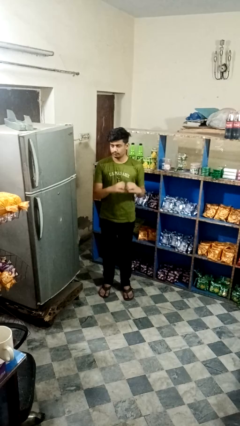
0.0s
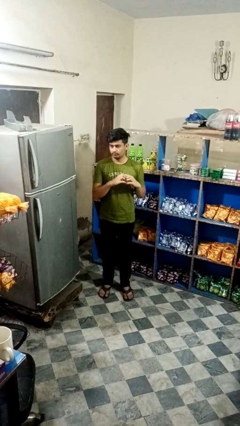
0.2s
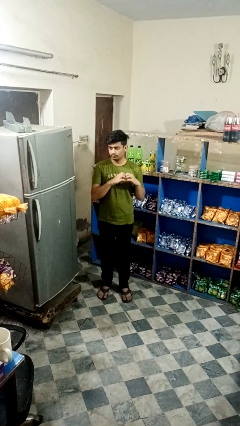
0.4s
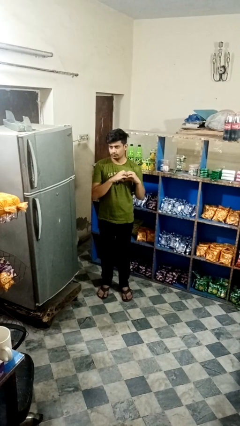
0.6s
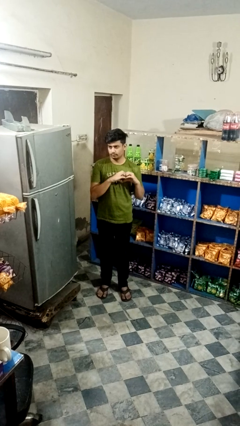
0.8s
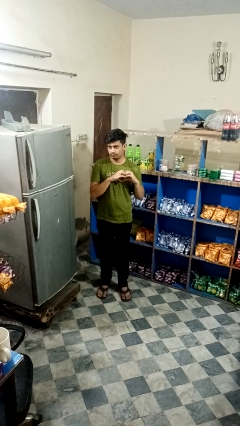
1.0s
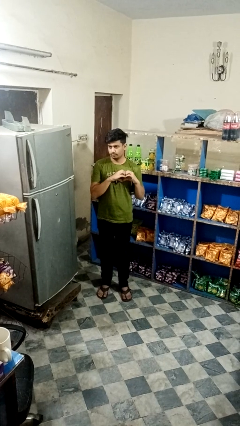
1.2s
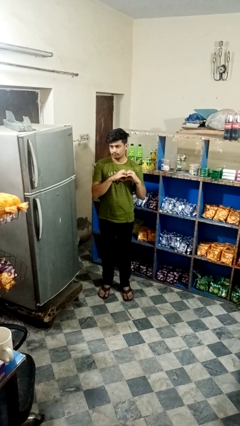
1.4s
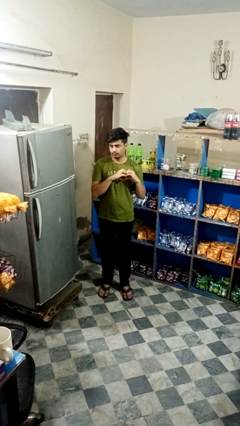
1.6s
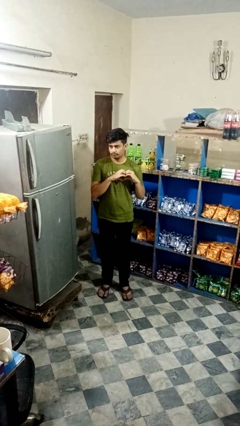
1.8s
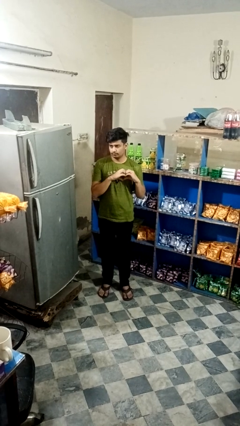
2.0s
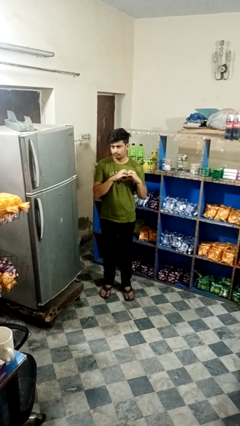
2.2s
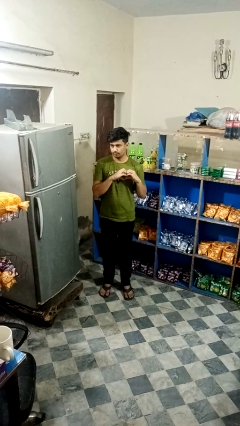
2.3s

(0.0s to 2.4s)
person gestures heart

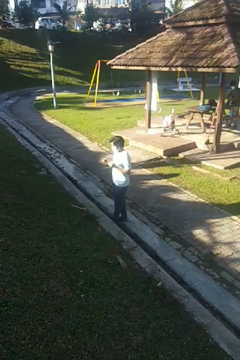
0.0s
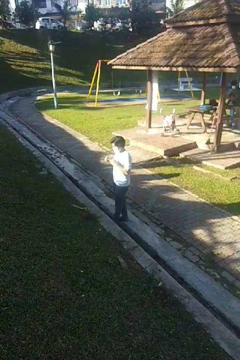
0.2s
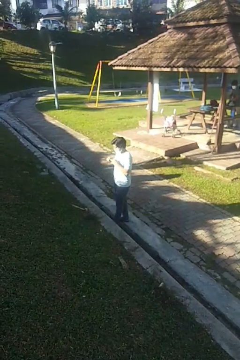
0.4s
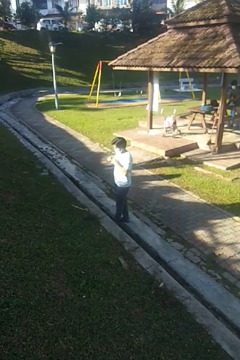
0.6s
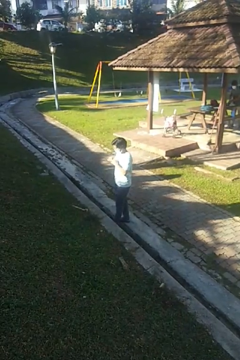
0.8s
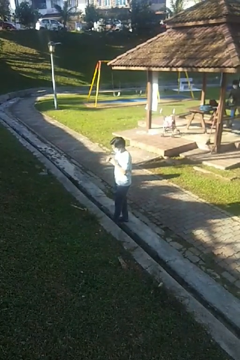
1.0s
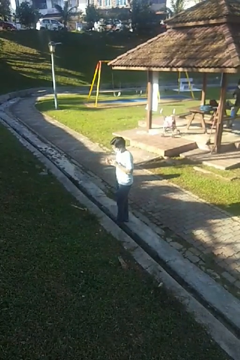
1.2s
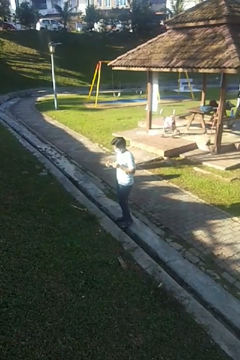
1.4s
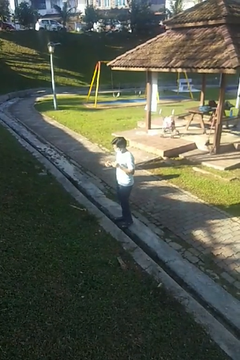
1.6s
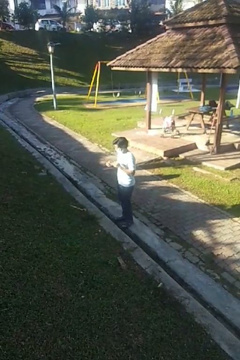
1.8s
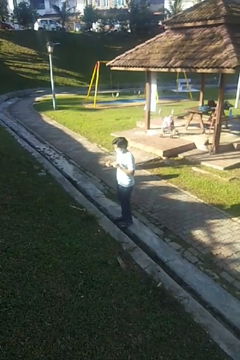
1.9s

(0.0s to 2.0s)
person puts on ring

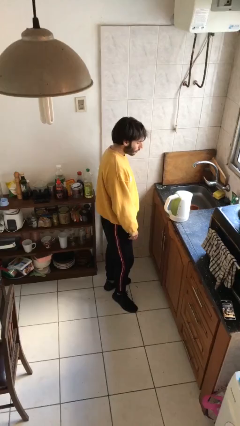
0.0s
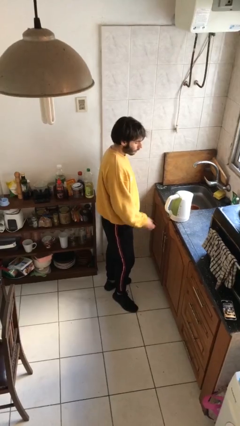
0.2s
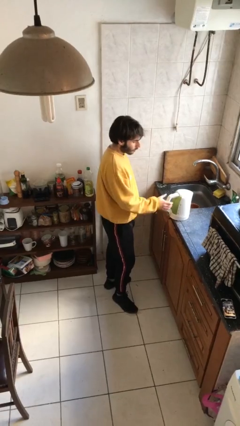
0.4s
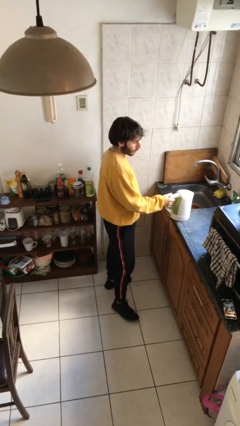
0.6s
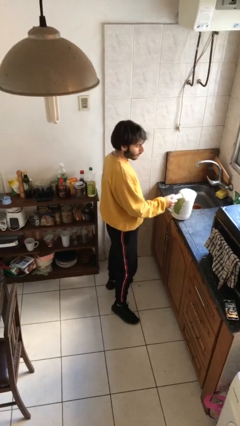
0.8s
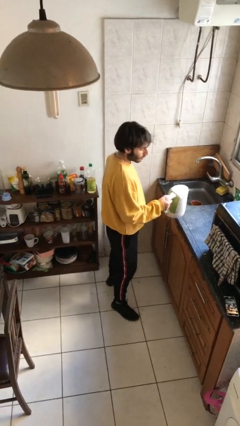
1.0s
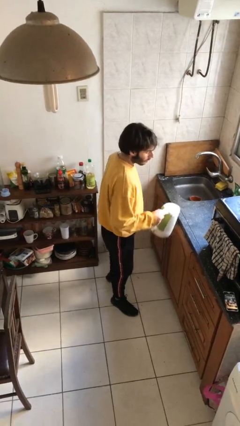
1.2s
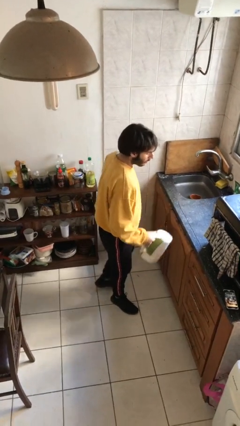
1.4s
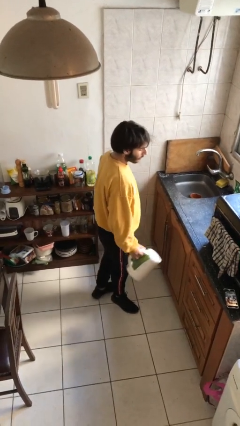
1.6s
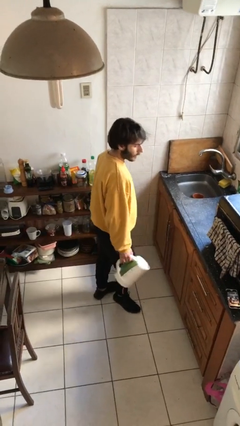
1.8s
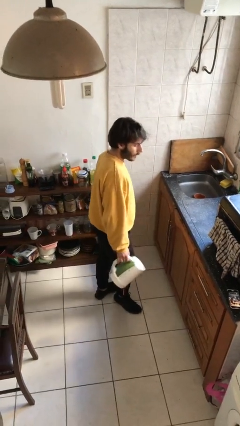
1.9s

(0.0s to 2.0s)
person picks up object from countertop

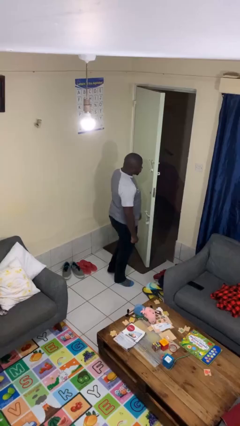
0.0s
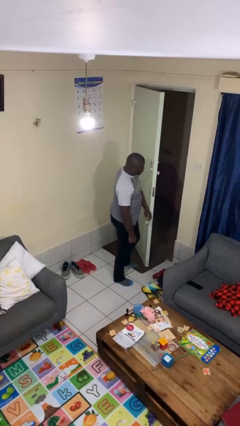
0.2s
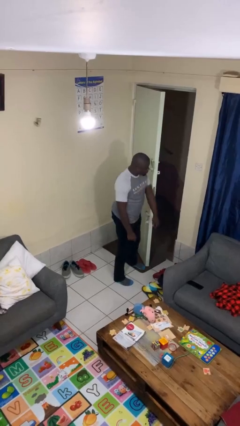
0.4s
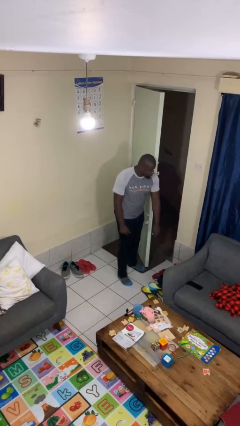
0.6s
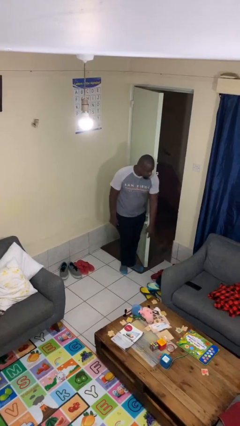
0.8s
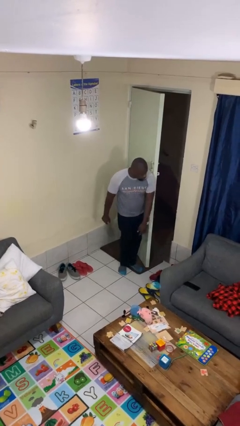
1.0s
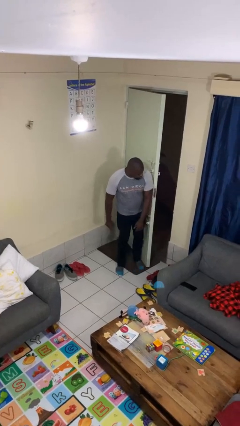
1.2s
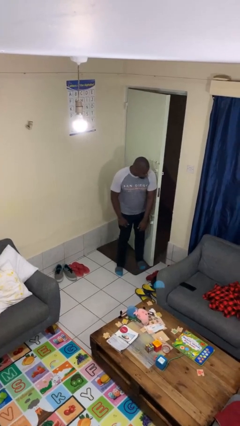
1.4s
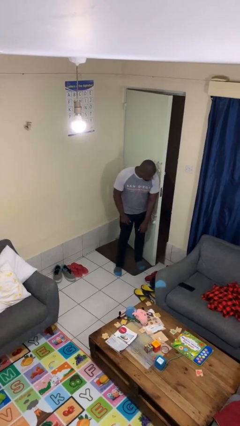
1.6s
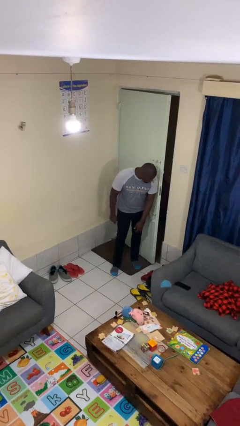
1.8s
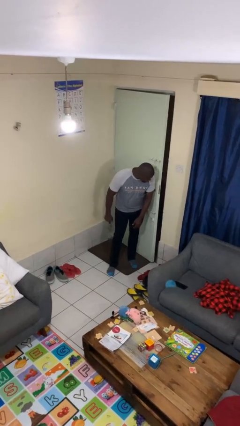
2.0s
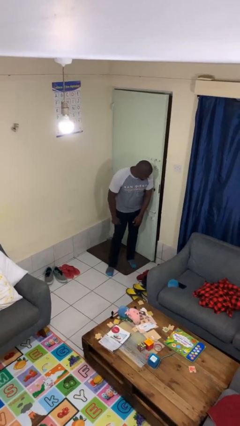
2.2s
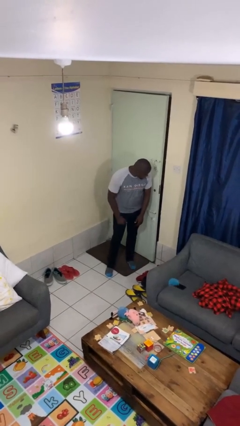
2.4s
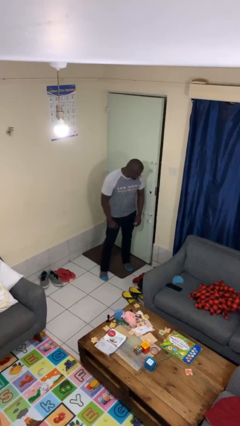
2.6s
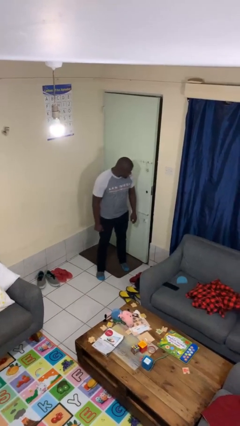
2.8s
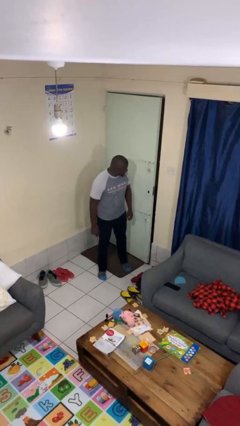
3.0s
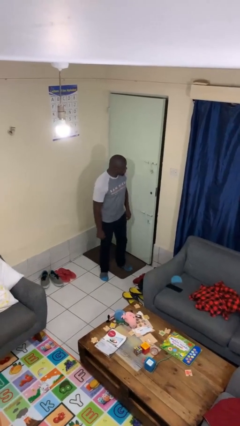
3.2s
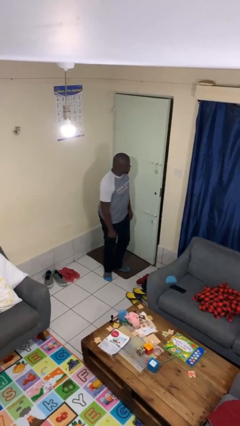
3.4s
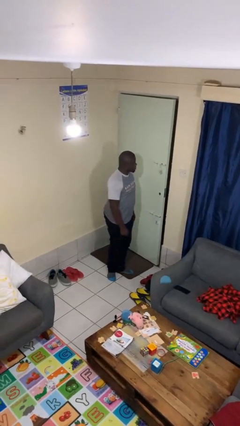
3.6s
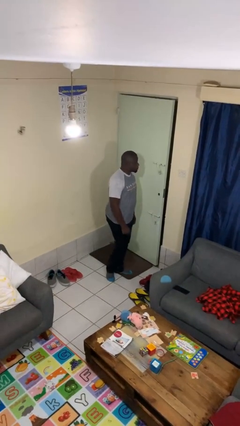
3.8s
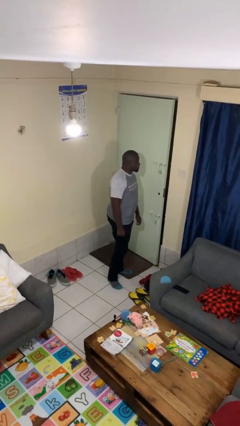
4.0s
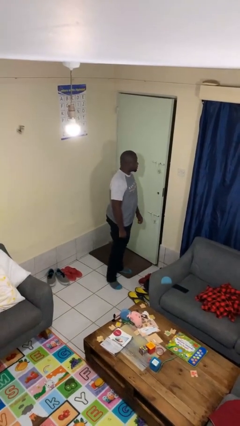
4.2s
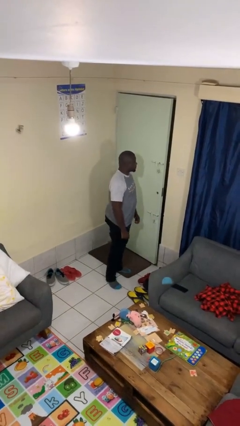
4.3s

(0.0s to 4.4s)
person closes door with hip

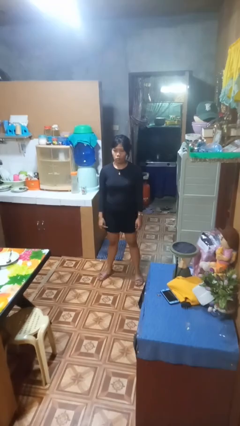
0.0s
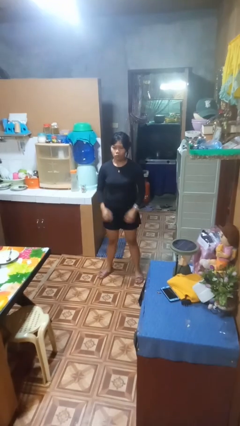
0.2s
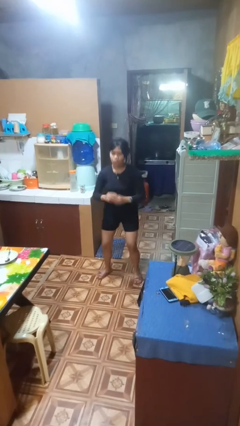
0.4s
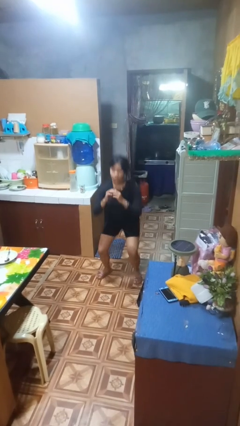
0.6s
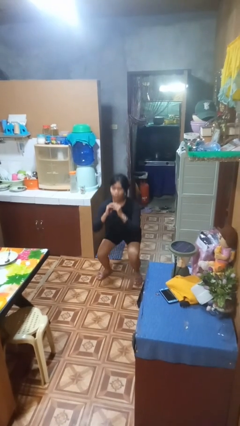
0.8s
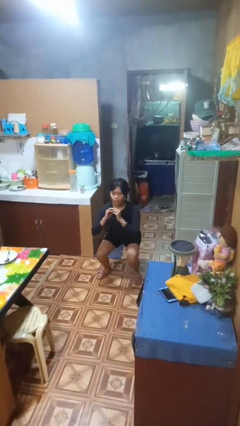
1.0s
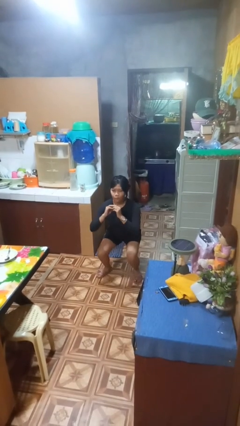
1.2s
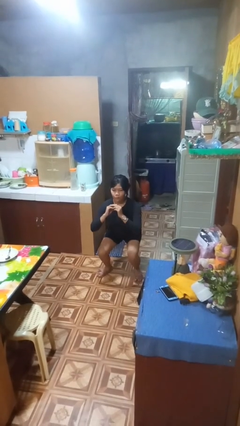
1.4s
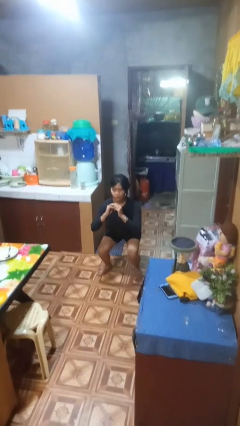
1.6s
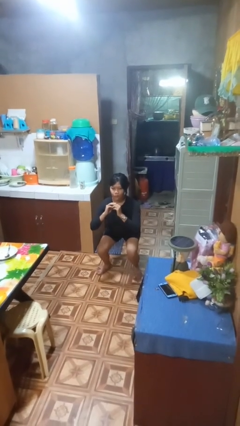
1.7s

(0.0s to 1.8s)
person squats

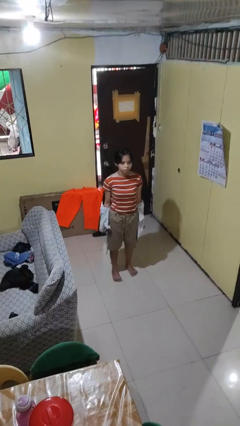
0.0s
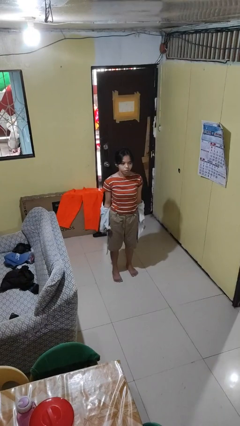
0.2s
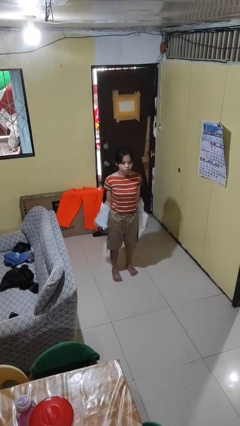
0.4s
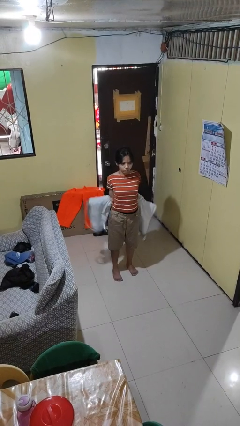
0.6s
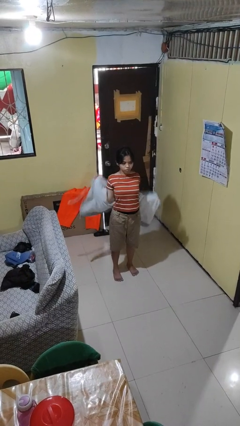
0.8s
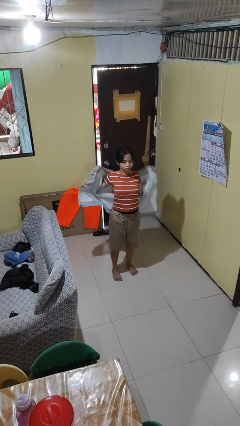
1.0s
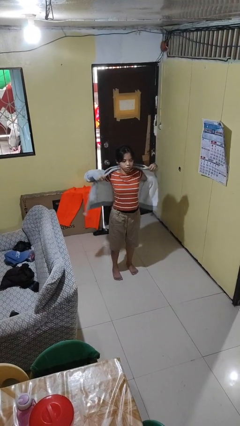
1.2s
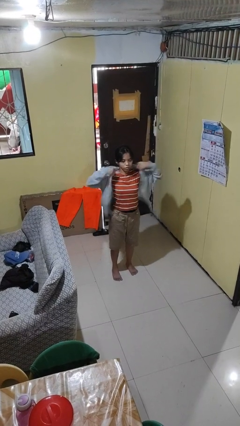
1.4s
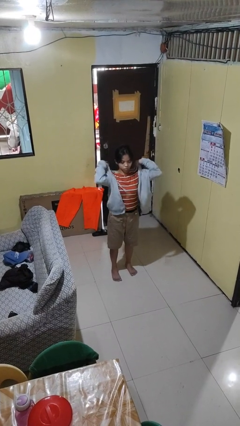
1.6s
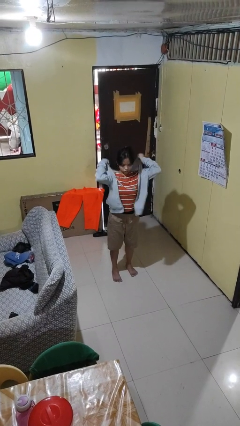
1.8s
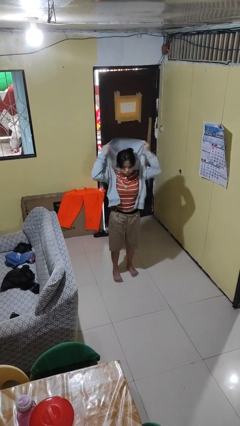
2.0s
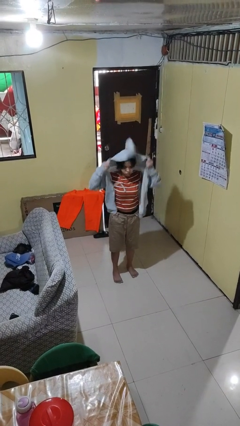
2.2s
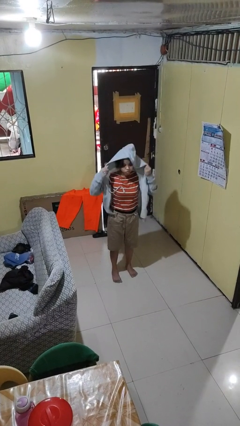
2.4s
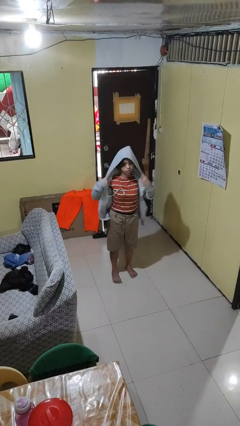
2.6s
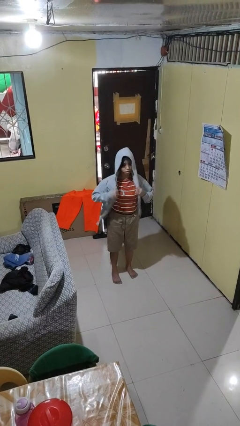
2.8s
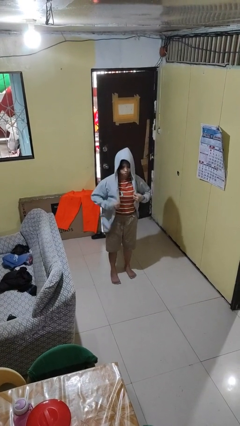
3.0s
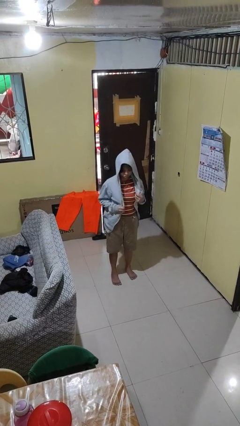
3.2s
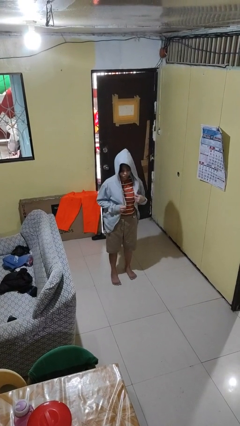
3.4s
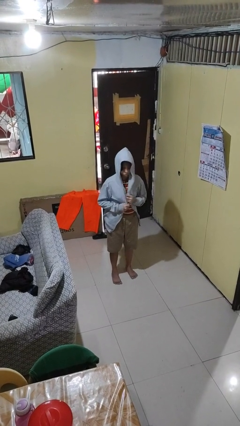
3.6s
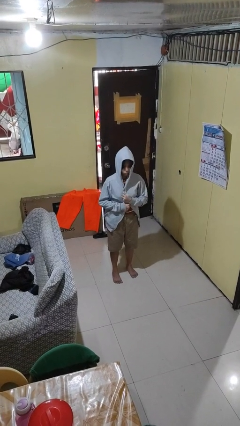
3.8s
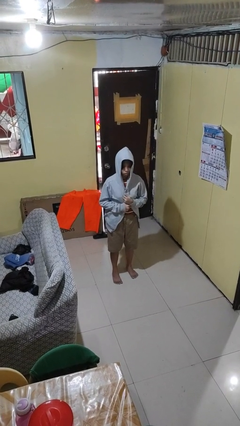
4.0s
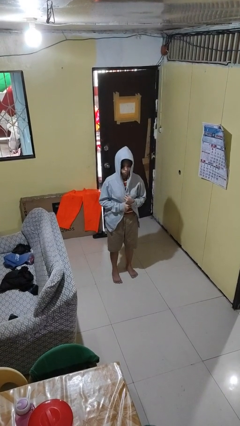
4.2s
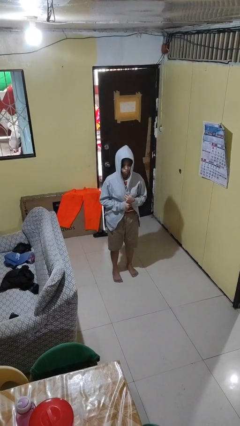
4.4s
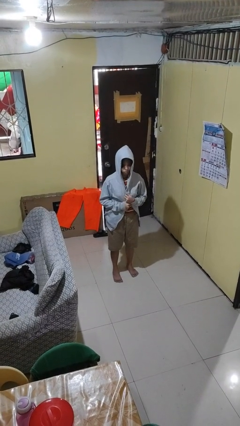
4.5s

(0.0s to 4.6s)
person puts on hoodie

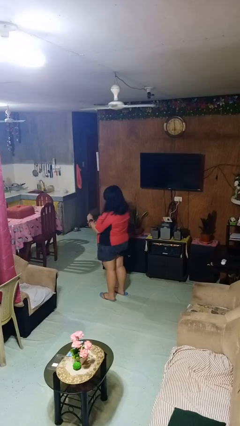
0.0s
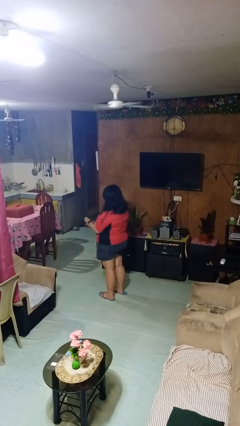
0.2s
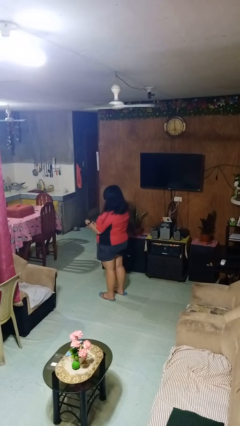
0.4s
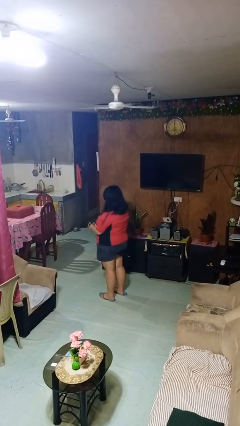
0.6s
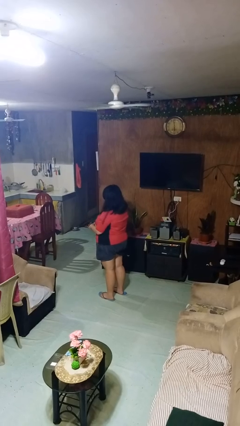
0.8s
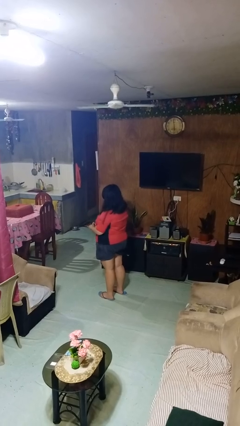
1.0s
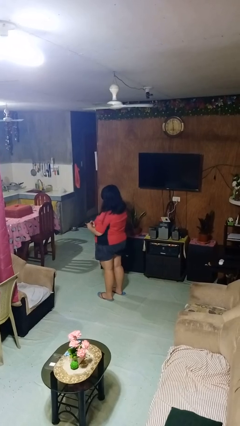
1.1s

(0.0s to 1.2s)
person takes off wristwatch
